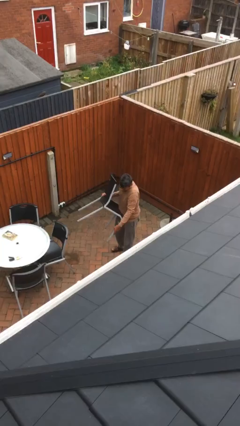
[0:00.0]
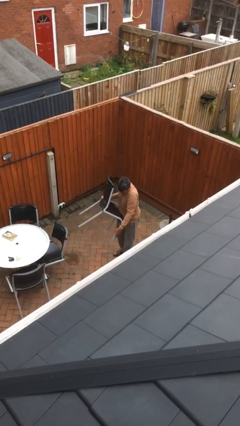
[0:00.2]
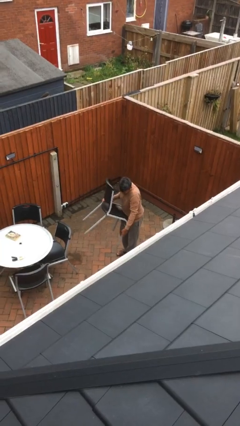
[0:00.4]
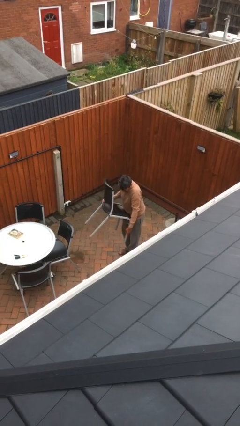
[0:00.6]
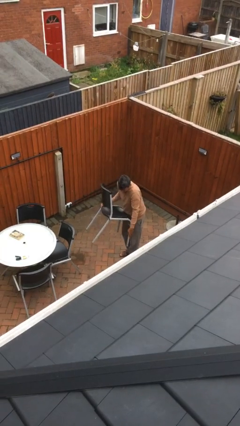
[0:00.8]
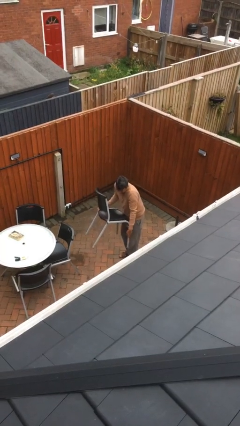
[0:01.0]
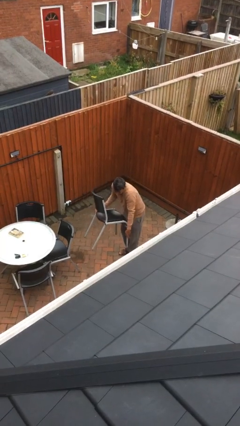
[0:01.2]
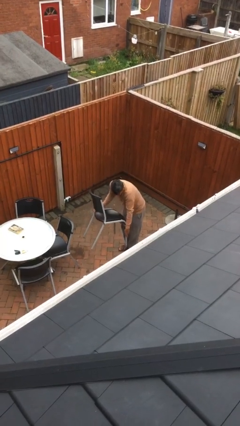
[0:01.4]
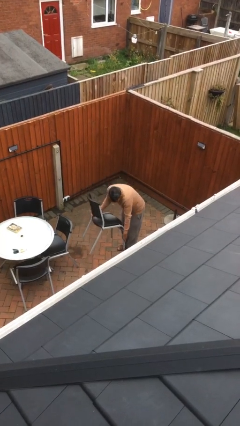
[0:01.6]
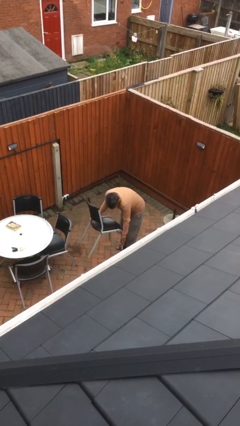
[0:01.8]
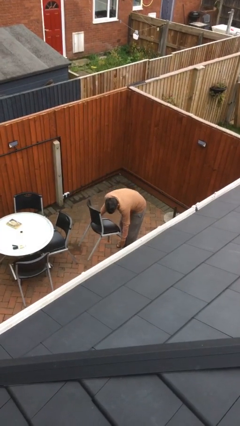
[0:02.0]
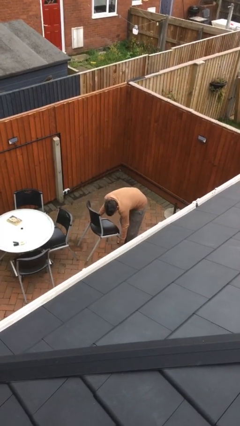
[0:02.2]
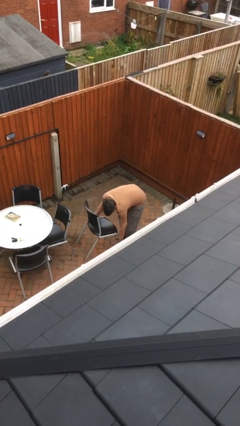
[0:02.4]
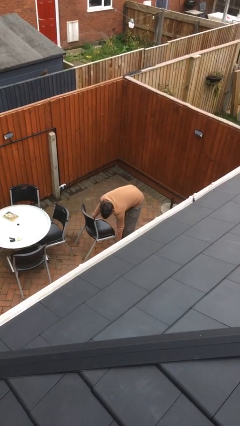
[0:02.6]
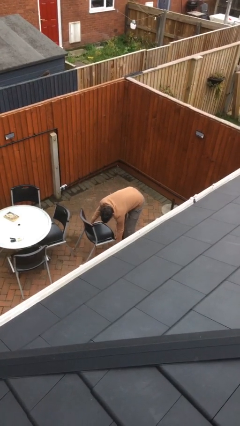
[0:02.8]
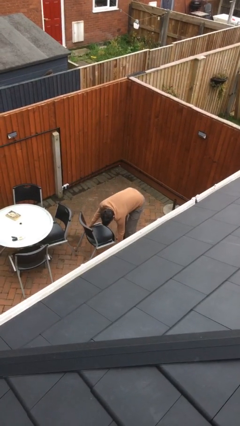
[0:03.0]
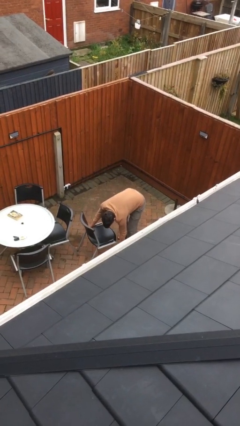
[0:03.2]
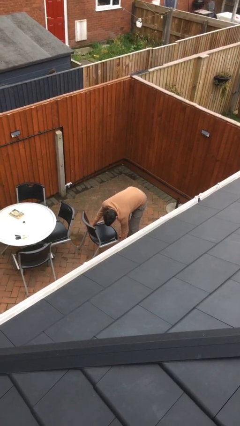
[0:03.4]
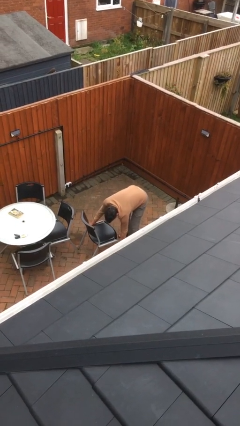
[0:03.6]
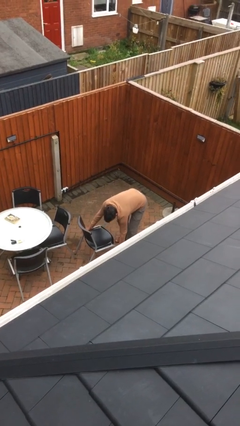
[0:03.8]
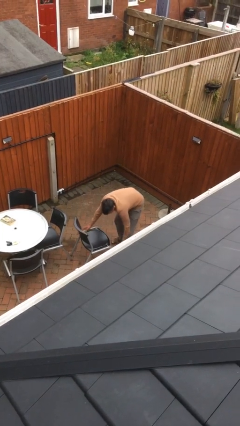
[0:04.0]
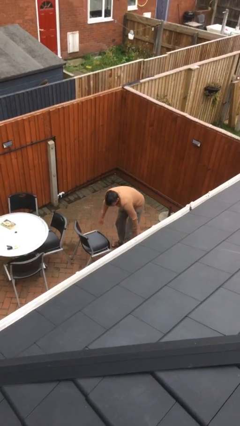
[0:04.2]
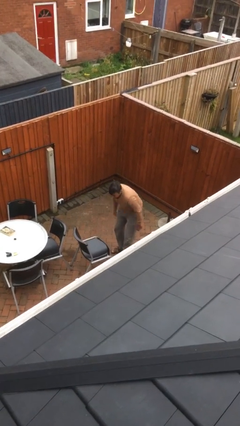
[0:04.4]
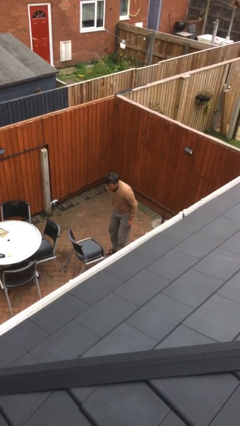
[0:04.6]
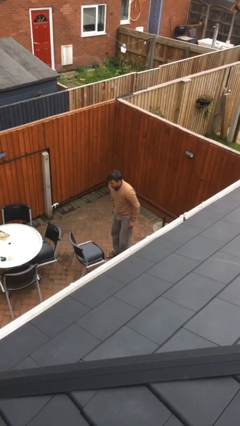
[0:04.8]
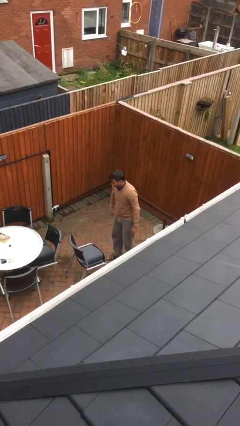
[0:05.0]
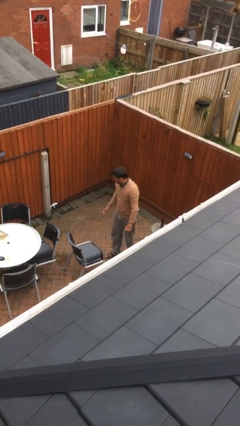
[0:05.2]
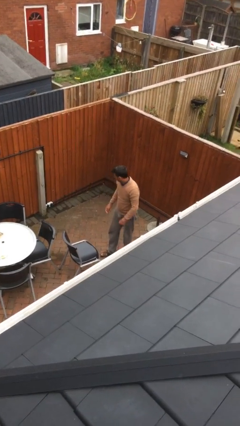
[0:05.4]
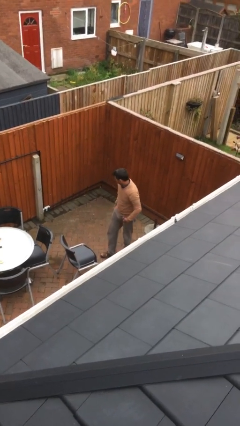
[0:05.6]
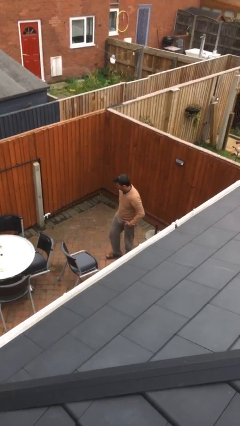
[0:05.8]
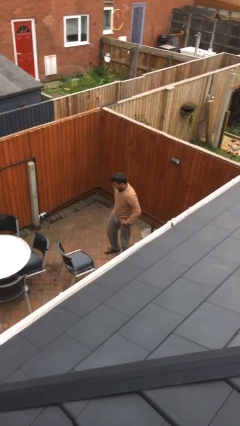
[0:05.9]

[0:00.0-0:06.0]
person puts down object on floor

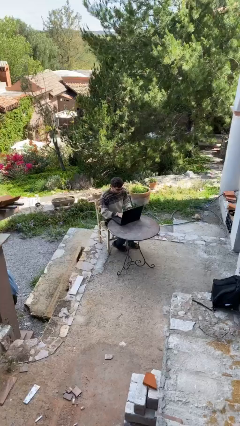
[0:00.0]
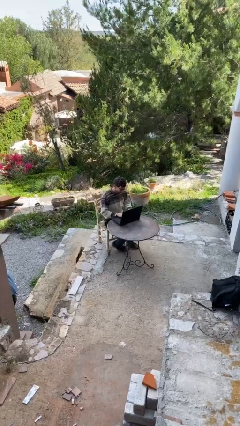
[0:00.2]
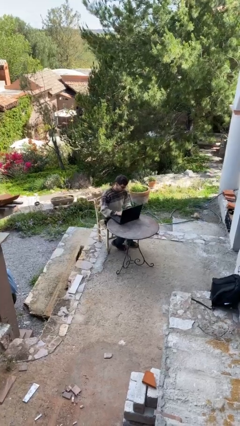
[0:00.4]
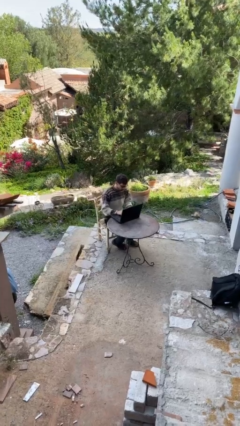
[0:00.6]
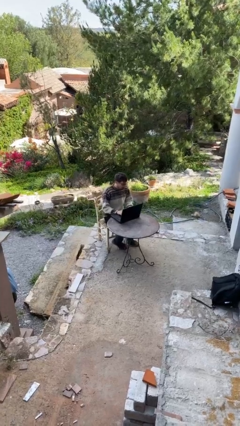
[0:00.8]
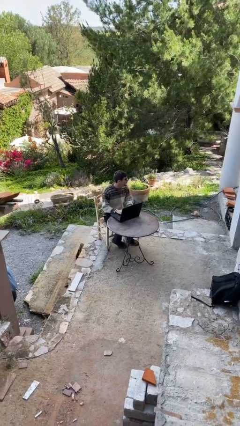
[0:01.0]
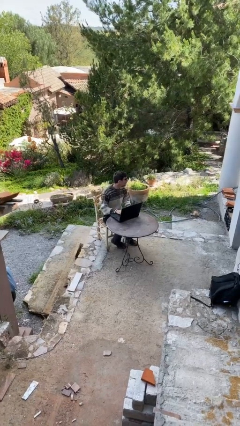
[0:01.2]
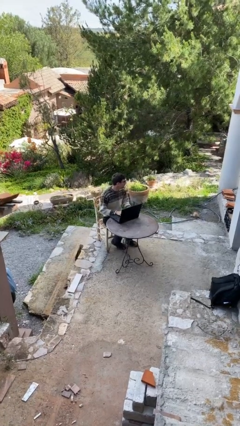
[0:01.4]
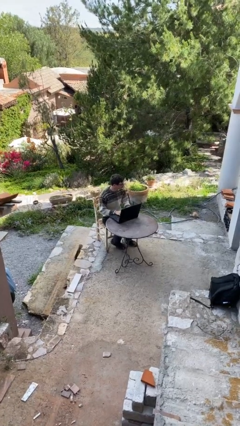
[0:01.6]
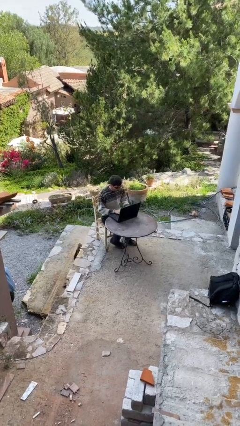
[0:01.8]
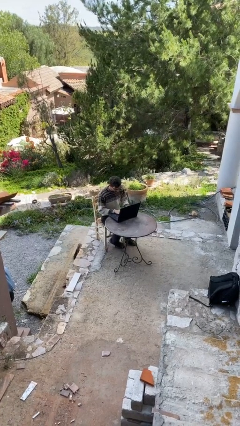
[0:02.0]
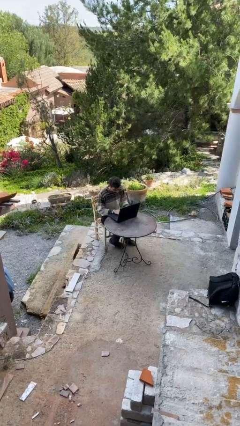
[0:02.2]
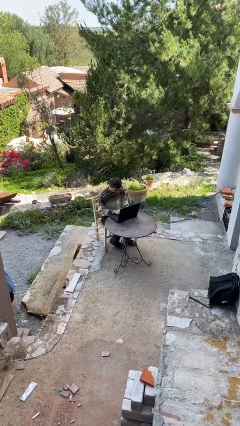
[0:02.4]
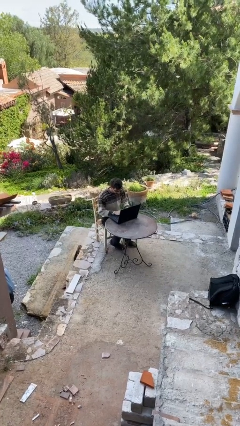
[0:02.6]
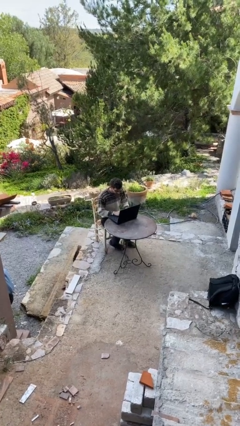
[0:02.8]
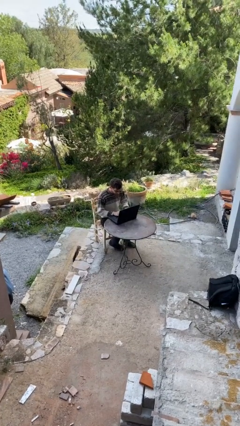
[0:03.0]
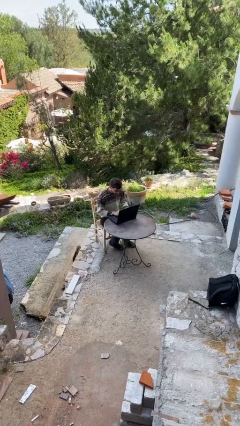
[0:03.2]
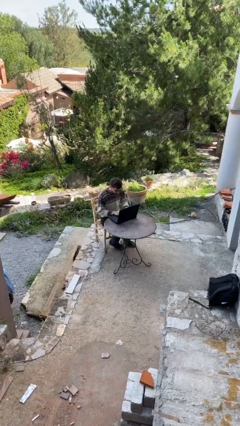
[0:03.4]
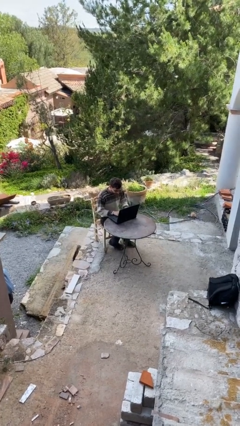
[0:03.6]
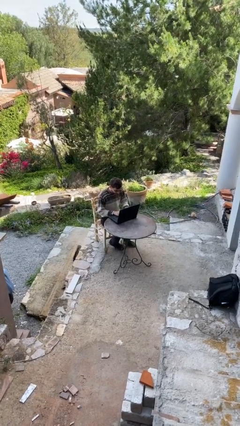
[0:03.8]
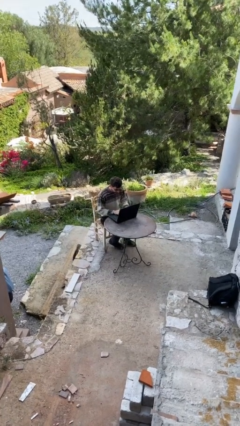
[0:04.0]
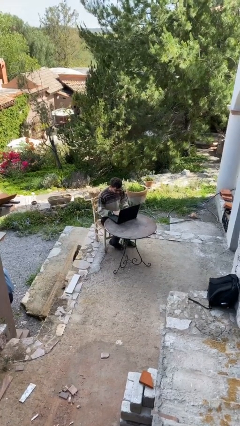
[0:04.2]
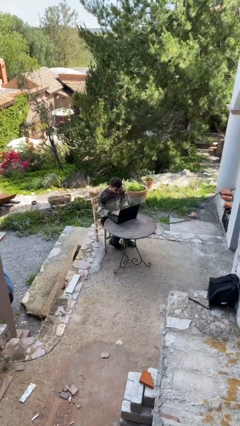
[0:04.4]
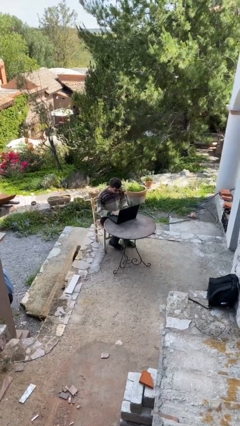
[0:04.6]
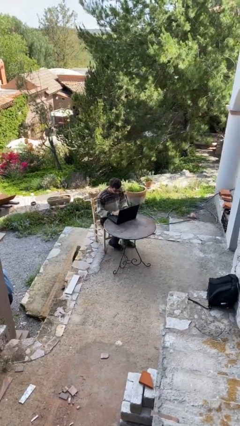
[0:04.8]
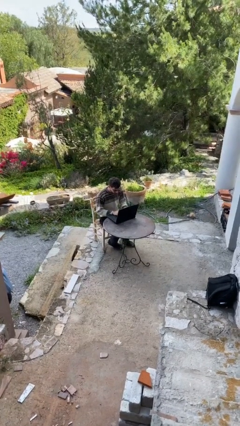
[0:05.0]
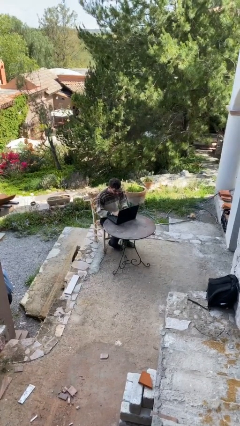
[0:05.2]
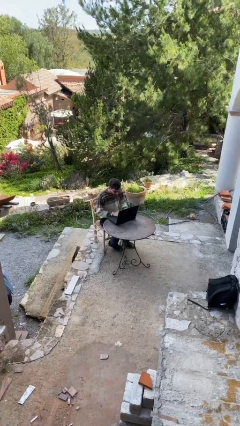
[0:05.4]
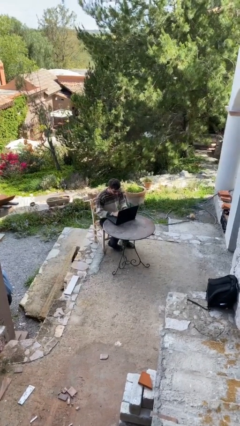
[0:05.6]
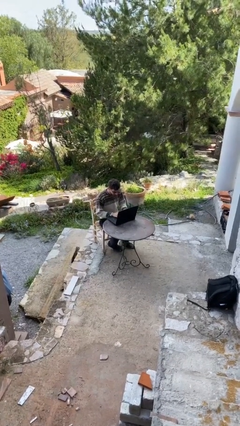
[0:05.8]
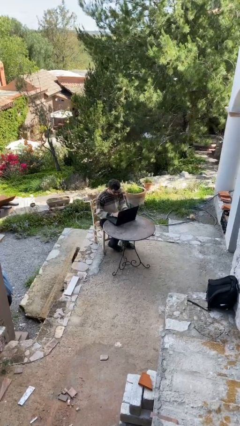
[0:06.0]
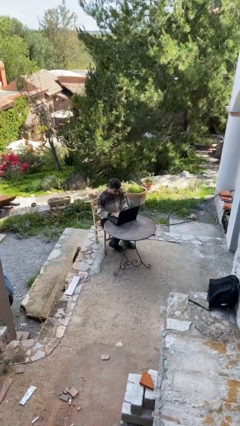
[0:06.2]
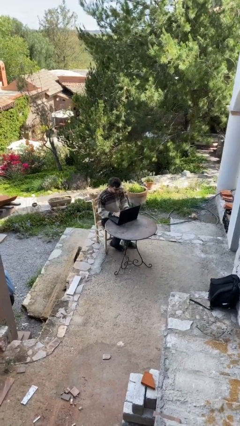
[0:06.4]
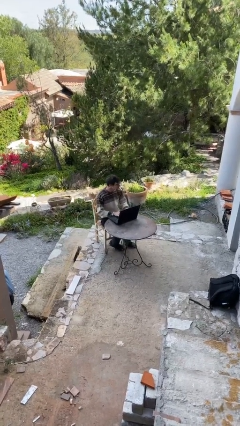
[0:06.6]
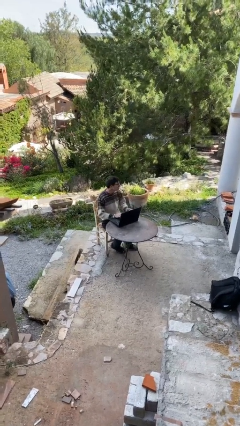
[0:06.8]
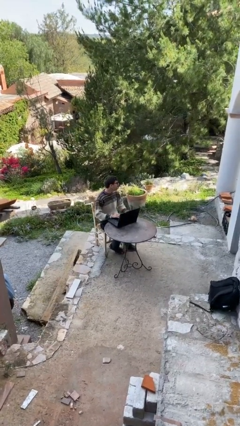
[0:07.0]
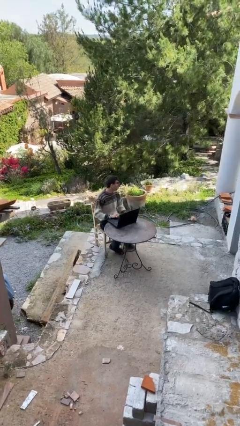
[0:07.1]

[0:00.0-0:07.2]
person interacts with laptop

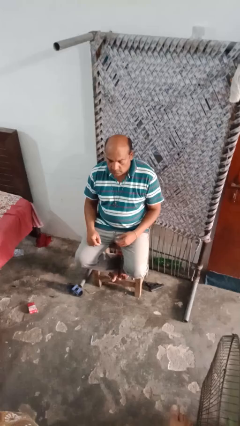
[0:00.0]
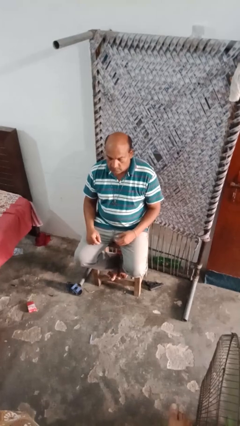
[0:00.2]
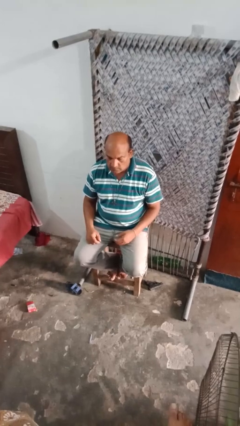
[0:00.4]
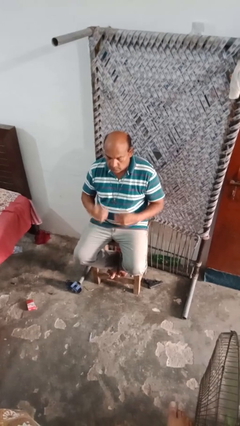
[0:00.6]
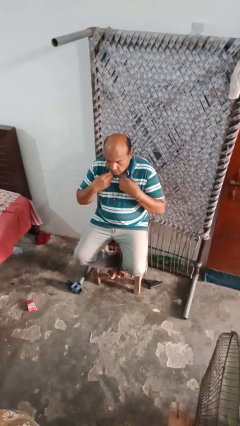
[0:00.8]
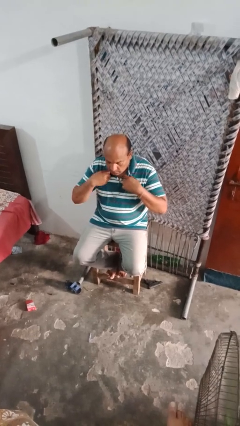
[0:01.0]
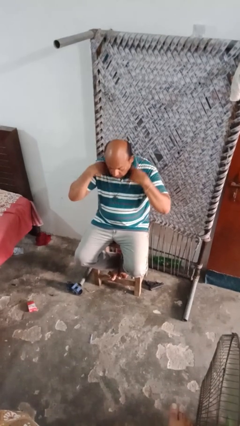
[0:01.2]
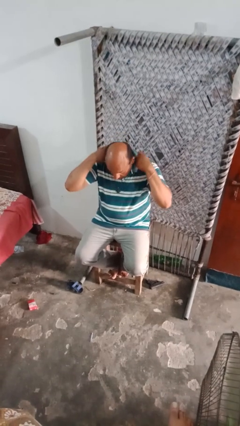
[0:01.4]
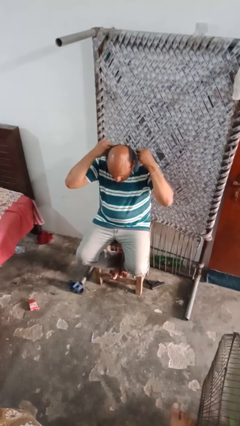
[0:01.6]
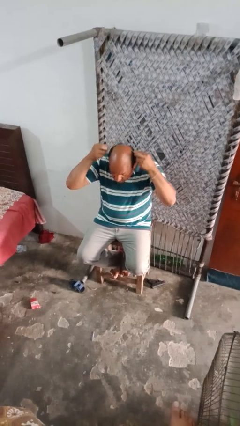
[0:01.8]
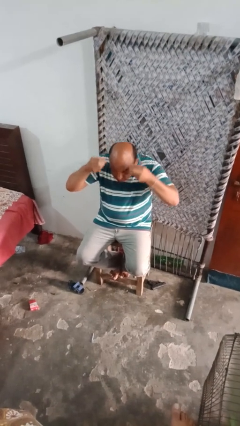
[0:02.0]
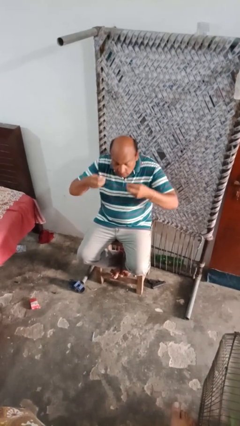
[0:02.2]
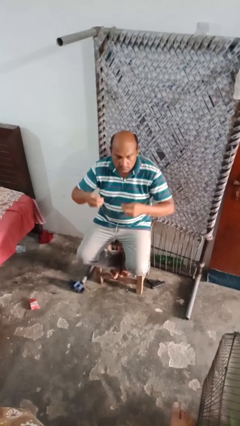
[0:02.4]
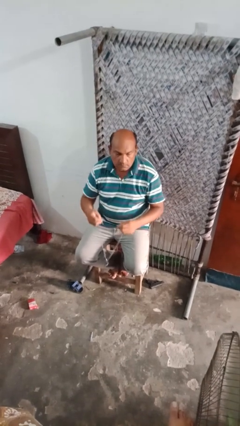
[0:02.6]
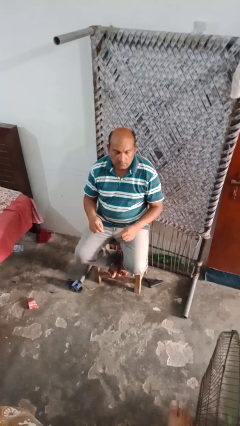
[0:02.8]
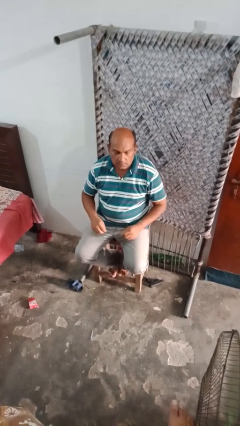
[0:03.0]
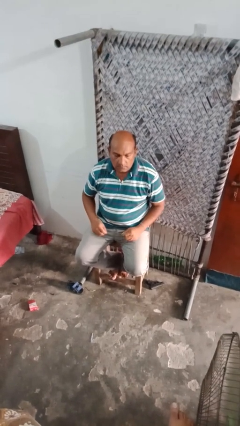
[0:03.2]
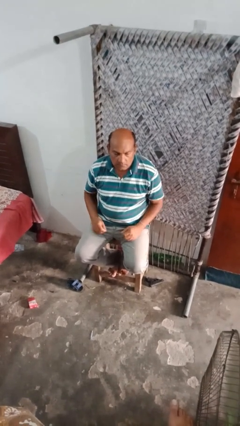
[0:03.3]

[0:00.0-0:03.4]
person takes off necklace

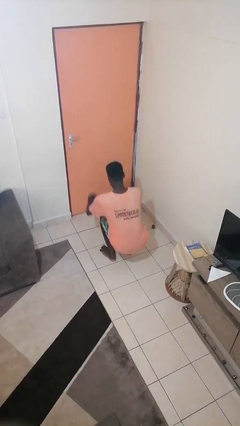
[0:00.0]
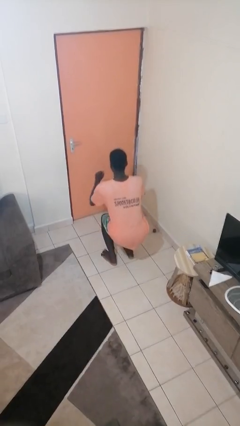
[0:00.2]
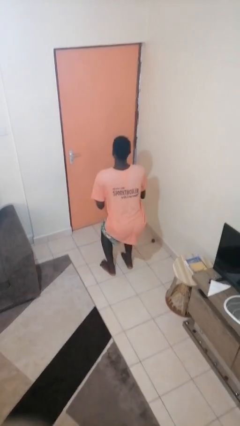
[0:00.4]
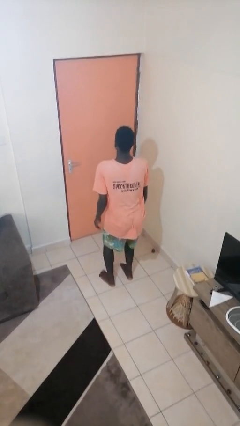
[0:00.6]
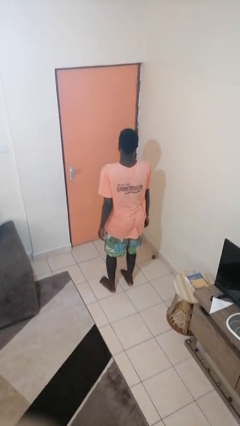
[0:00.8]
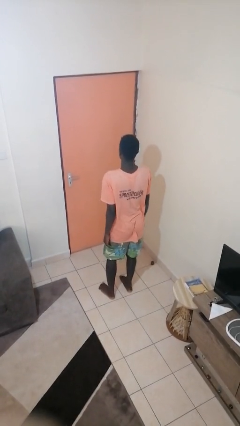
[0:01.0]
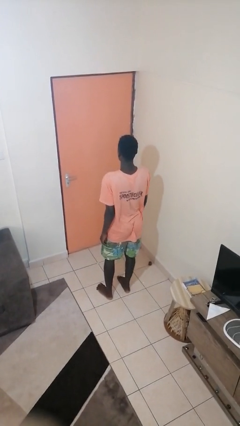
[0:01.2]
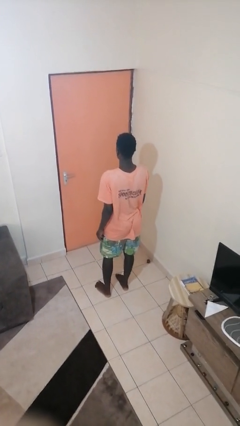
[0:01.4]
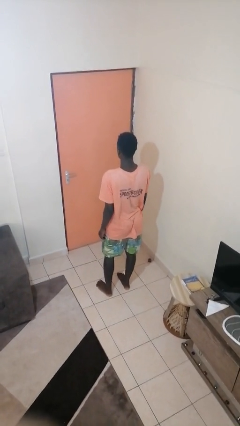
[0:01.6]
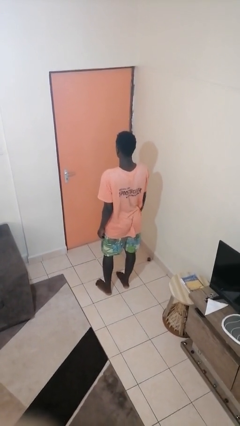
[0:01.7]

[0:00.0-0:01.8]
person stands up
